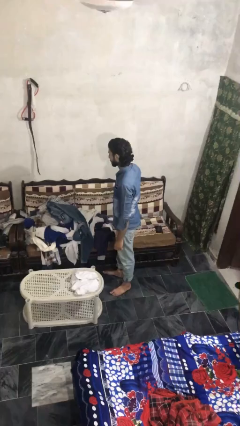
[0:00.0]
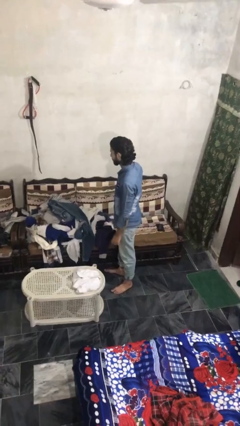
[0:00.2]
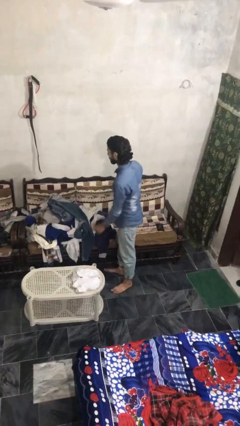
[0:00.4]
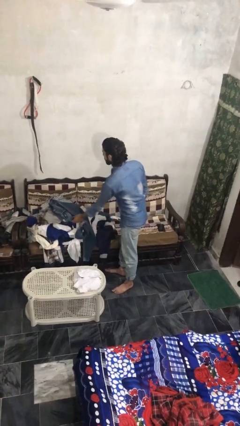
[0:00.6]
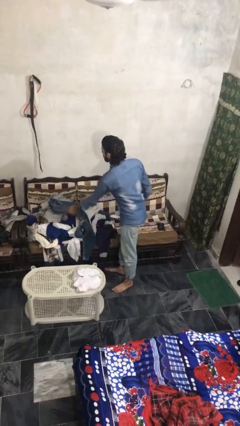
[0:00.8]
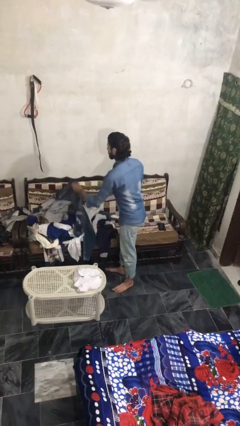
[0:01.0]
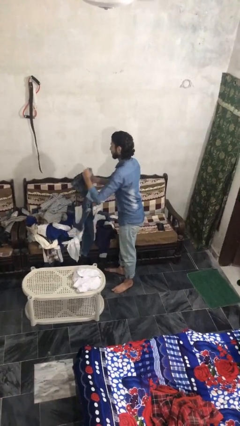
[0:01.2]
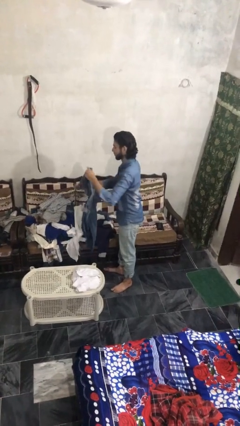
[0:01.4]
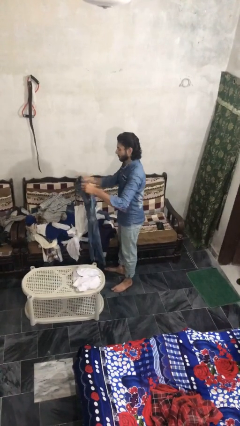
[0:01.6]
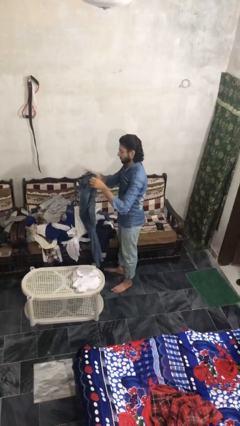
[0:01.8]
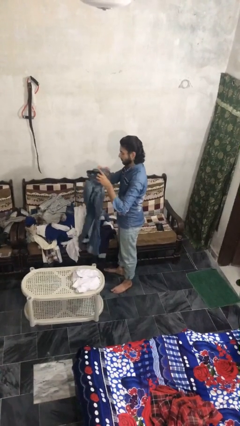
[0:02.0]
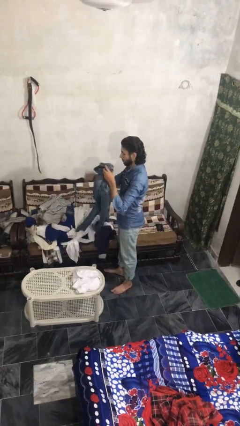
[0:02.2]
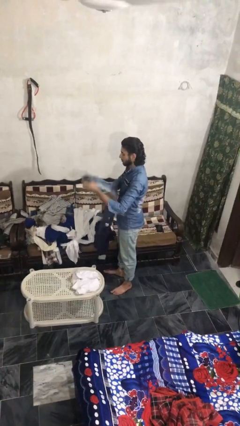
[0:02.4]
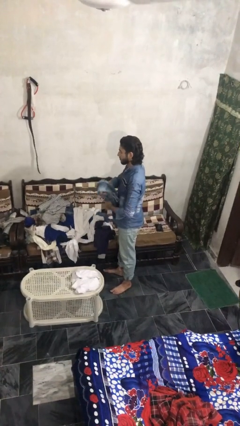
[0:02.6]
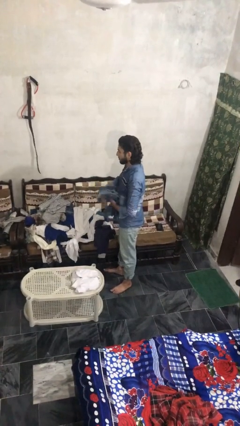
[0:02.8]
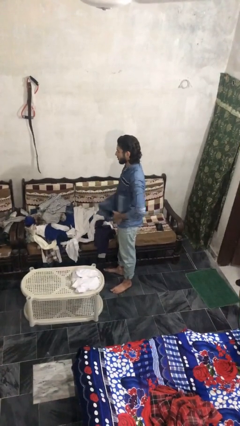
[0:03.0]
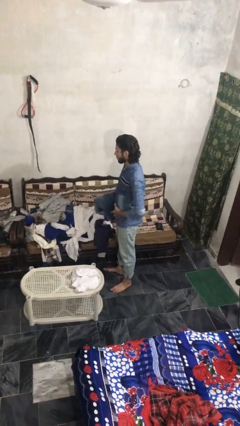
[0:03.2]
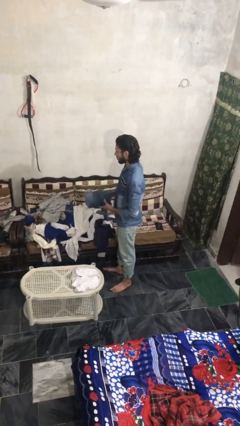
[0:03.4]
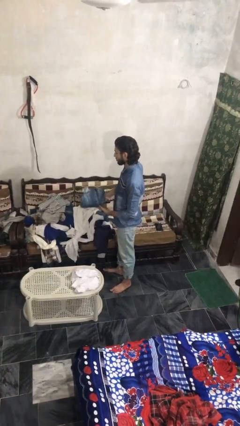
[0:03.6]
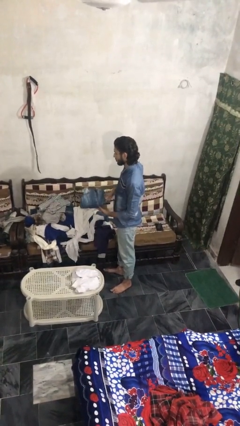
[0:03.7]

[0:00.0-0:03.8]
person folds pants

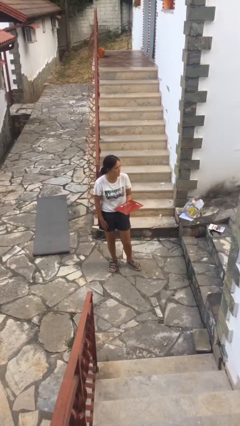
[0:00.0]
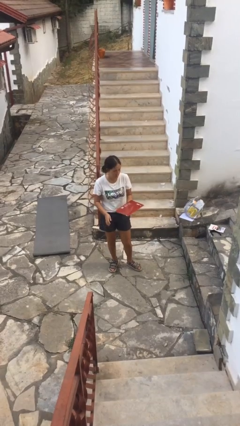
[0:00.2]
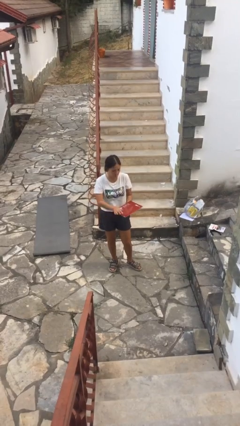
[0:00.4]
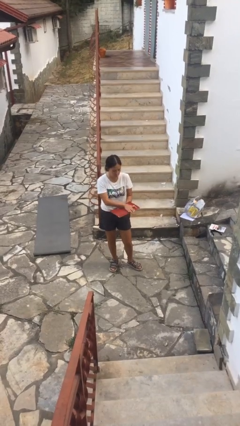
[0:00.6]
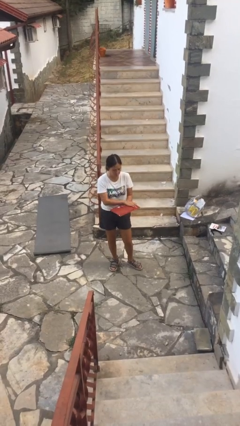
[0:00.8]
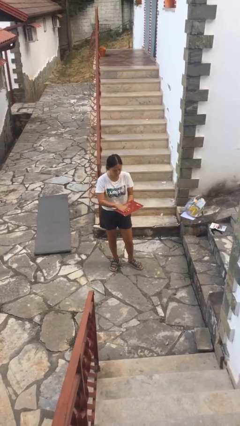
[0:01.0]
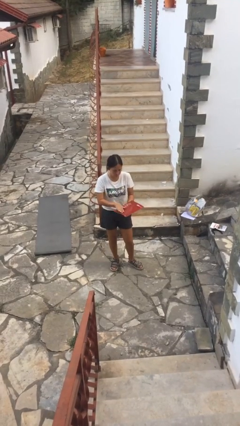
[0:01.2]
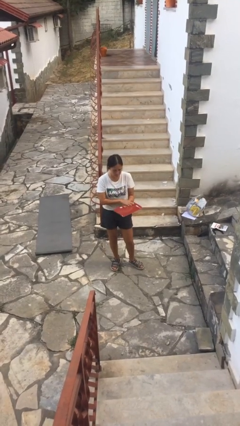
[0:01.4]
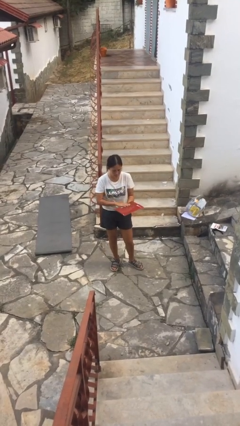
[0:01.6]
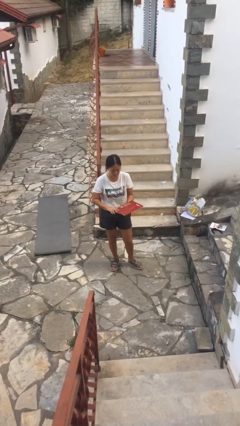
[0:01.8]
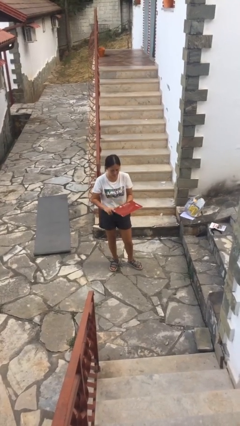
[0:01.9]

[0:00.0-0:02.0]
person waves hand over object

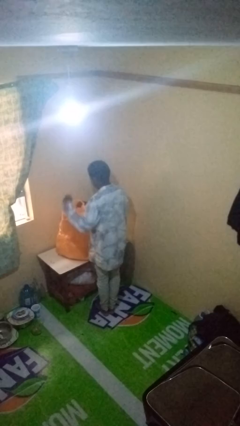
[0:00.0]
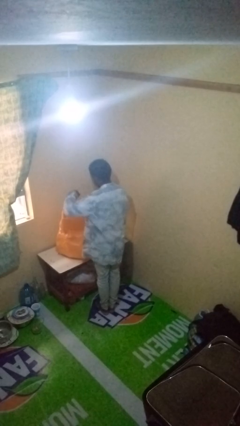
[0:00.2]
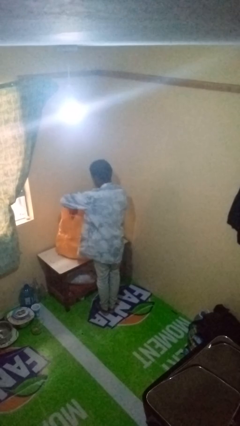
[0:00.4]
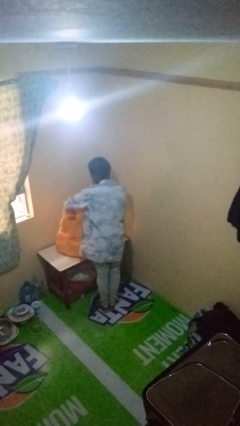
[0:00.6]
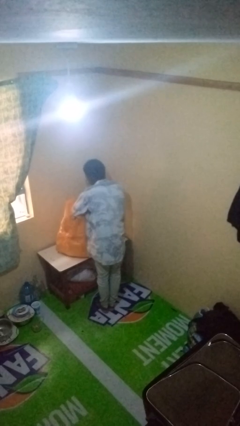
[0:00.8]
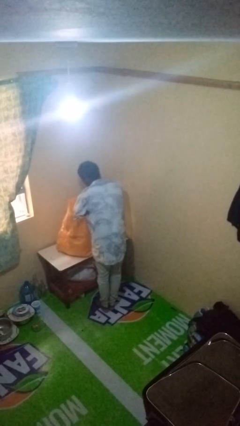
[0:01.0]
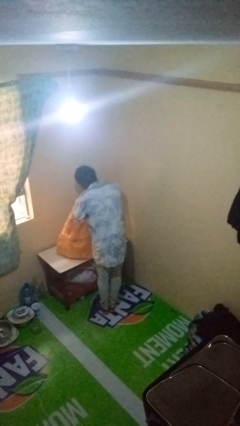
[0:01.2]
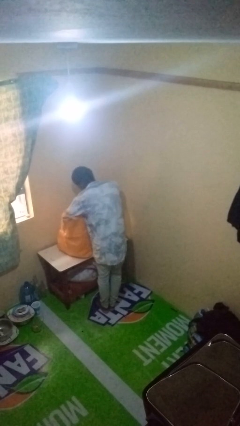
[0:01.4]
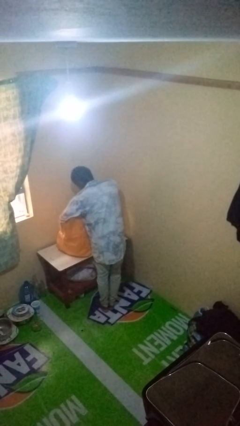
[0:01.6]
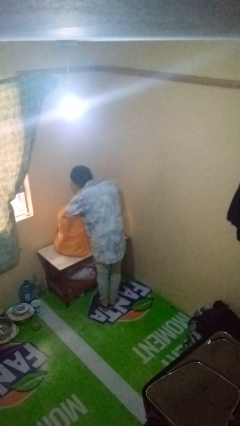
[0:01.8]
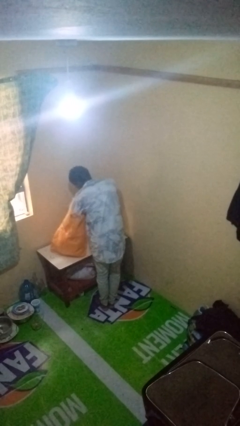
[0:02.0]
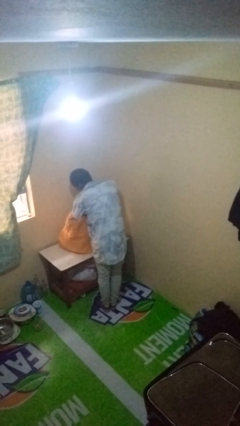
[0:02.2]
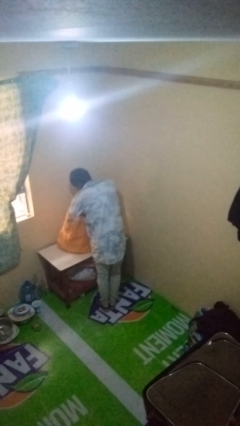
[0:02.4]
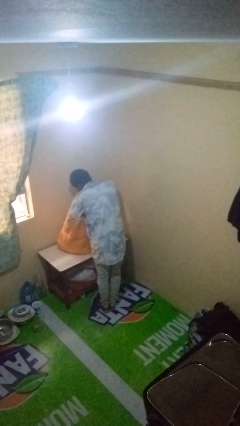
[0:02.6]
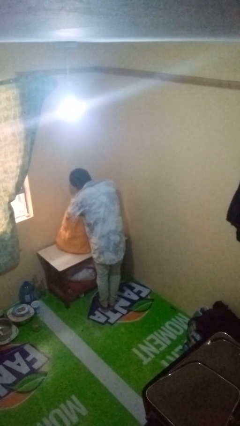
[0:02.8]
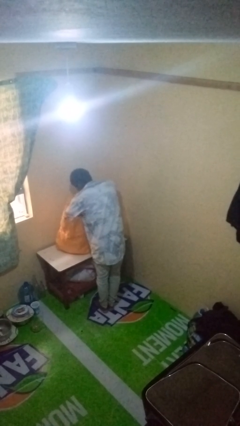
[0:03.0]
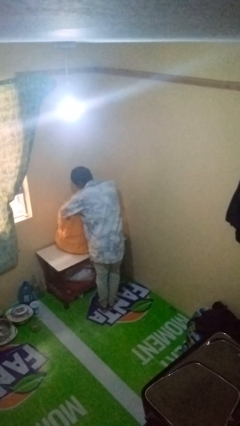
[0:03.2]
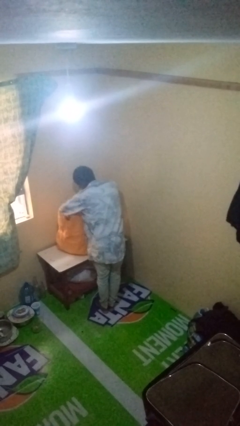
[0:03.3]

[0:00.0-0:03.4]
person searches in bag

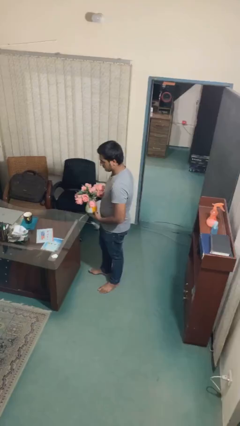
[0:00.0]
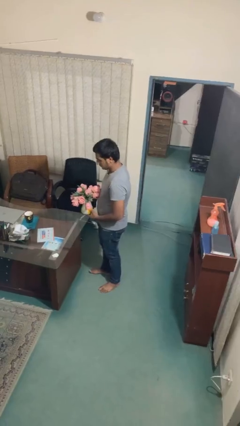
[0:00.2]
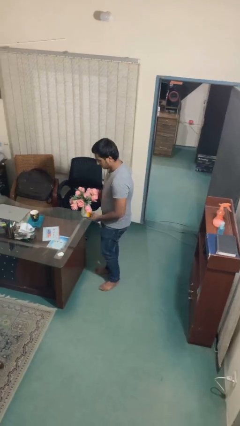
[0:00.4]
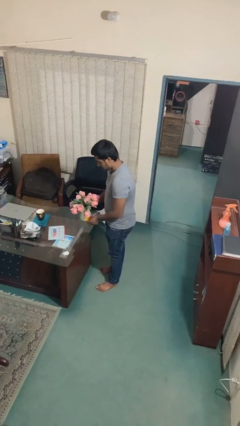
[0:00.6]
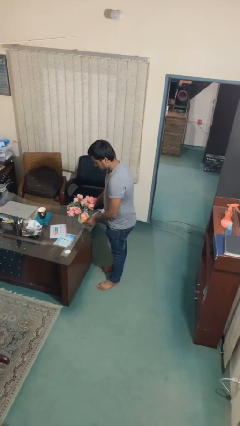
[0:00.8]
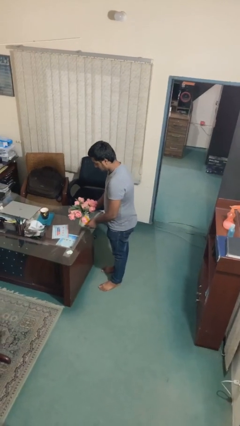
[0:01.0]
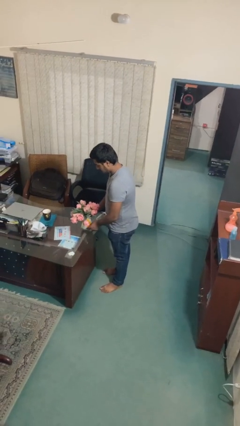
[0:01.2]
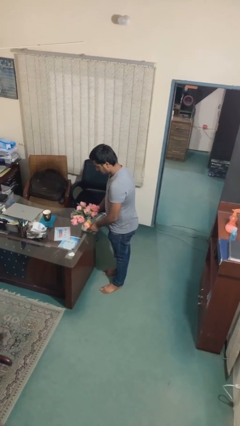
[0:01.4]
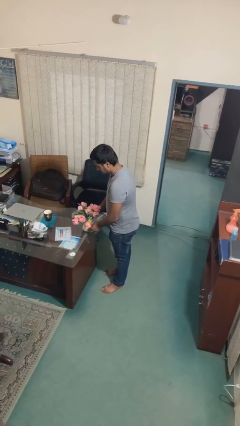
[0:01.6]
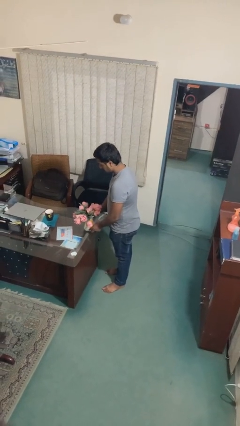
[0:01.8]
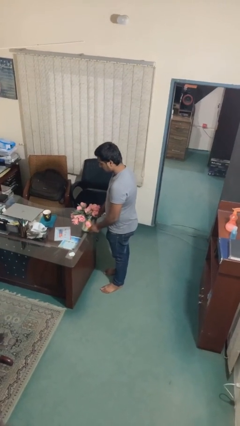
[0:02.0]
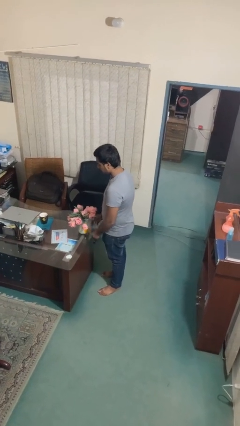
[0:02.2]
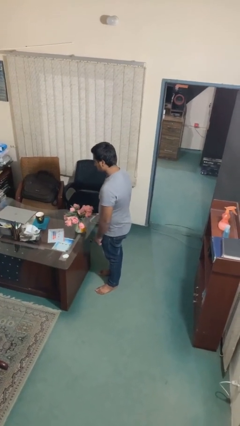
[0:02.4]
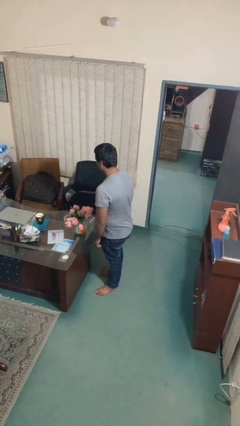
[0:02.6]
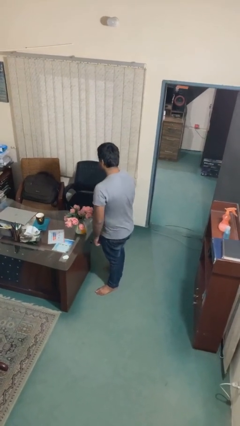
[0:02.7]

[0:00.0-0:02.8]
person puts down object on table

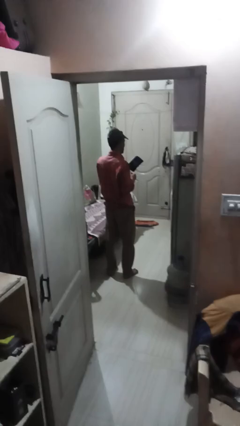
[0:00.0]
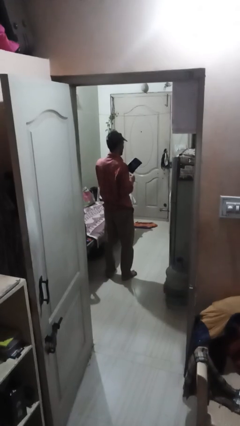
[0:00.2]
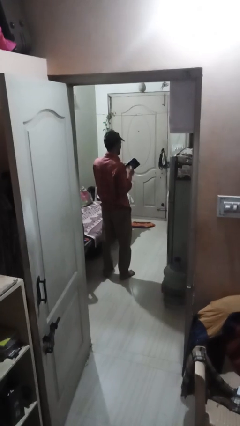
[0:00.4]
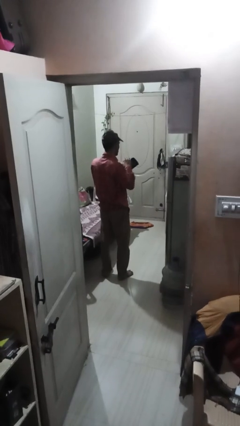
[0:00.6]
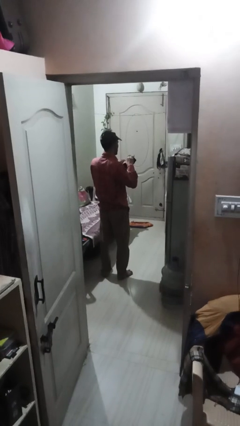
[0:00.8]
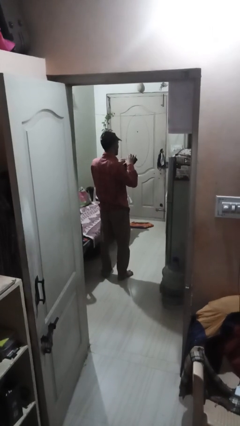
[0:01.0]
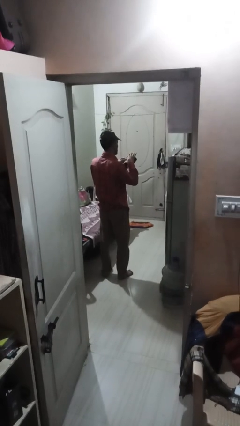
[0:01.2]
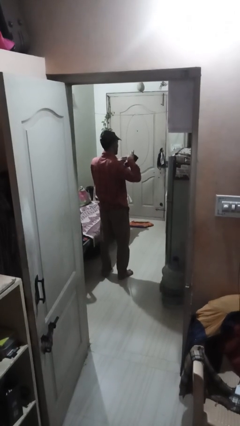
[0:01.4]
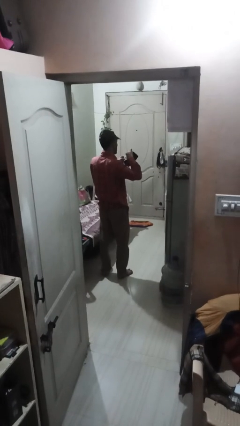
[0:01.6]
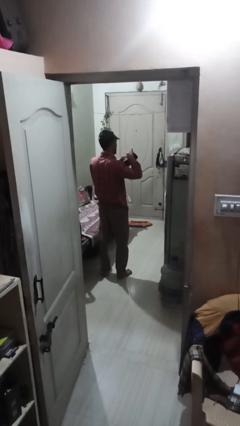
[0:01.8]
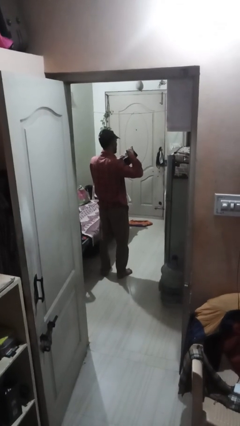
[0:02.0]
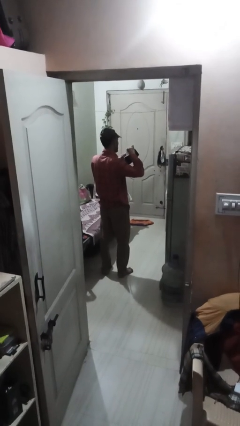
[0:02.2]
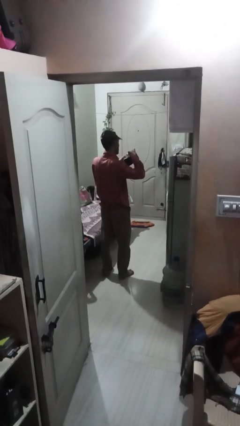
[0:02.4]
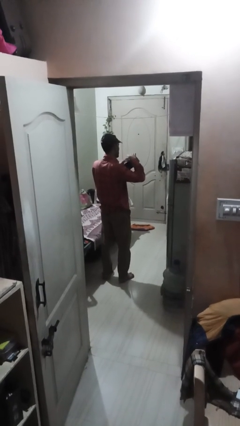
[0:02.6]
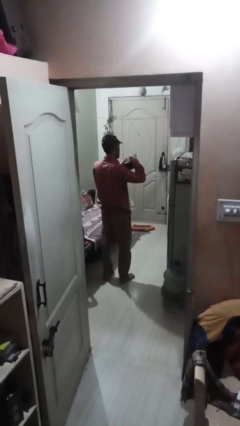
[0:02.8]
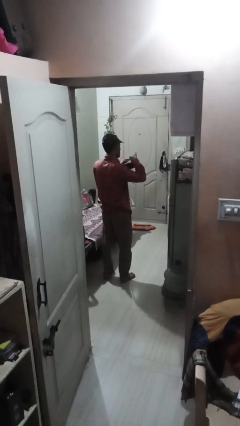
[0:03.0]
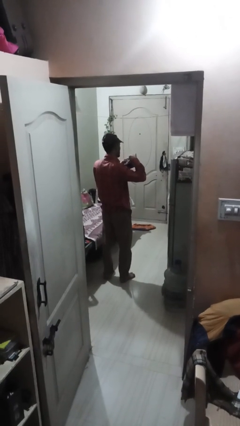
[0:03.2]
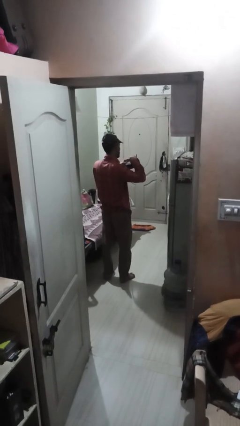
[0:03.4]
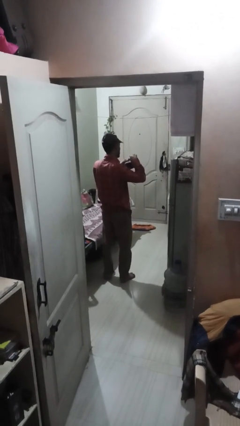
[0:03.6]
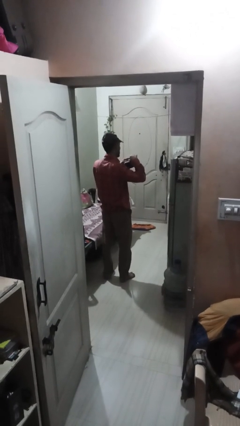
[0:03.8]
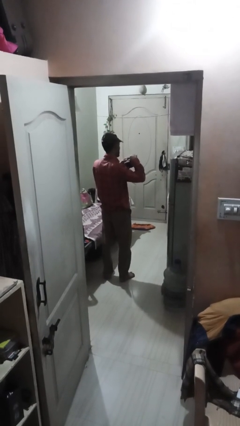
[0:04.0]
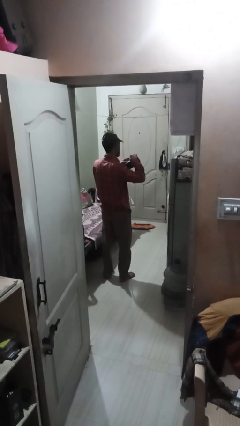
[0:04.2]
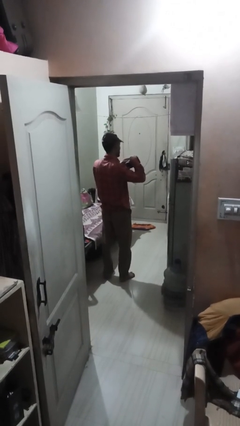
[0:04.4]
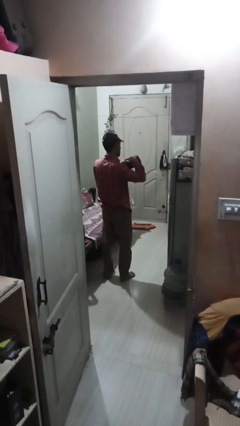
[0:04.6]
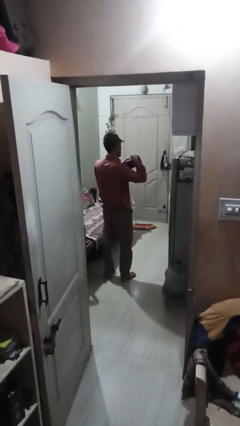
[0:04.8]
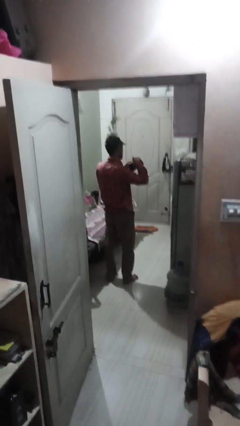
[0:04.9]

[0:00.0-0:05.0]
person searches in purse

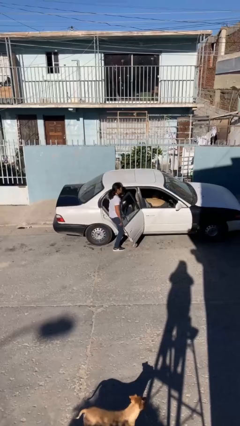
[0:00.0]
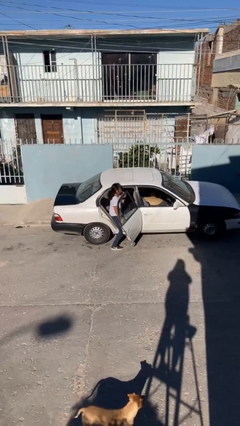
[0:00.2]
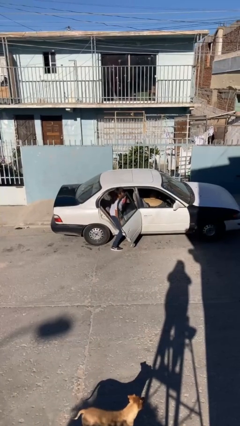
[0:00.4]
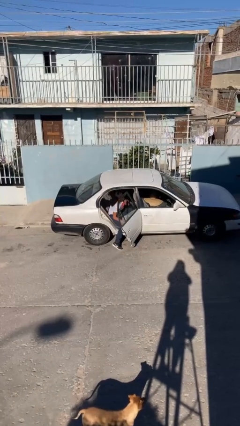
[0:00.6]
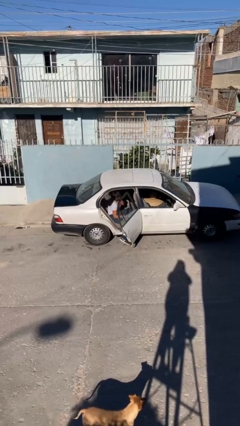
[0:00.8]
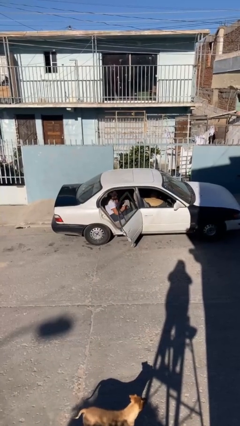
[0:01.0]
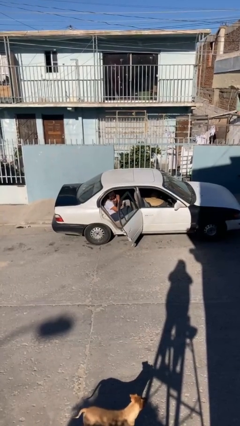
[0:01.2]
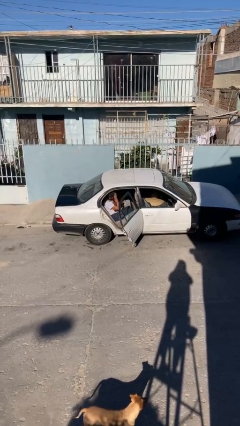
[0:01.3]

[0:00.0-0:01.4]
person enters car
